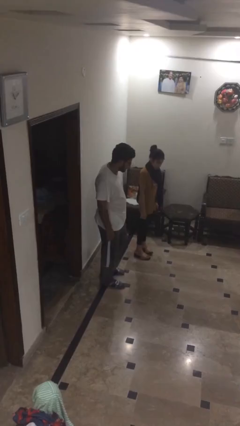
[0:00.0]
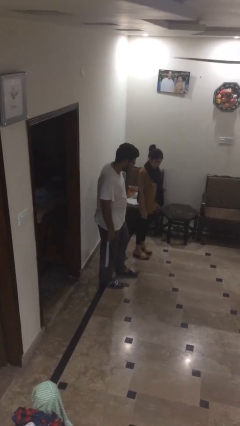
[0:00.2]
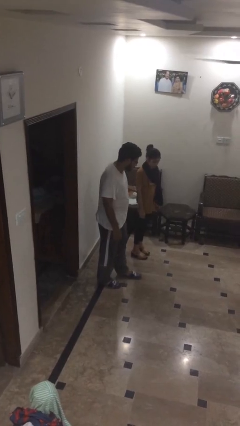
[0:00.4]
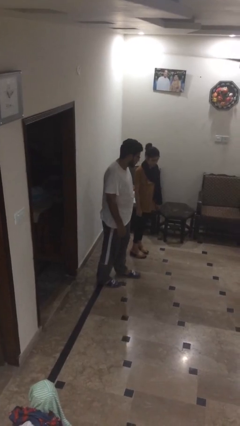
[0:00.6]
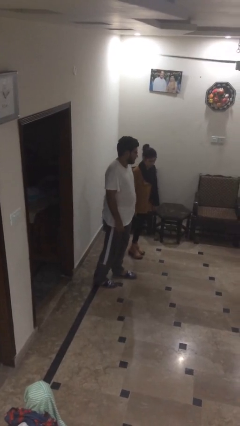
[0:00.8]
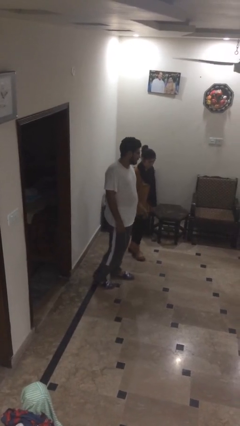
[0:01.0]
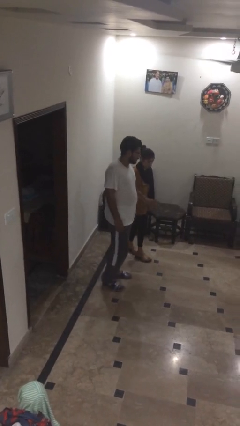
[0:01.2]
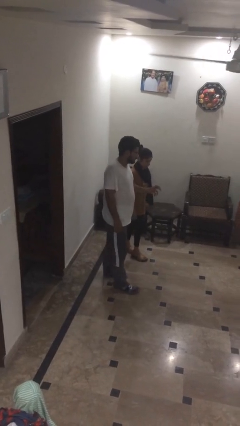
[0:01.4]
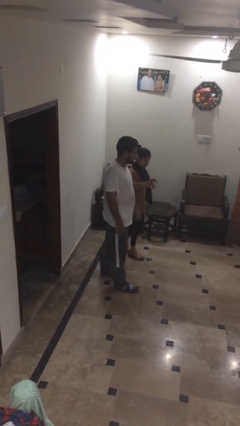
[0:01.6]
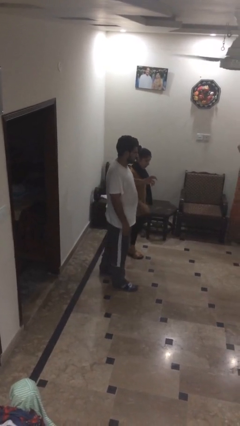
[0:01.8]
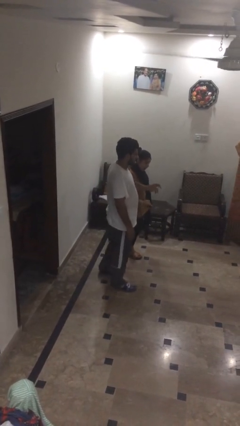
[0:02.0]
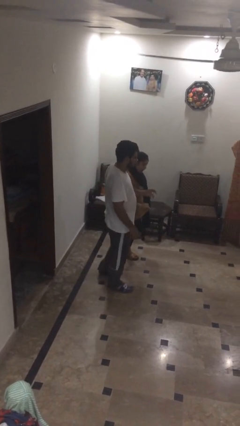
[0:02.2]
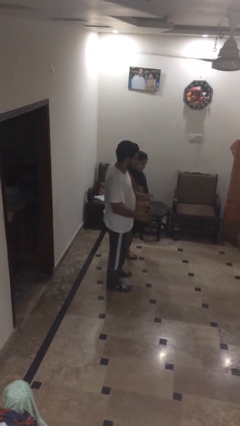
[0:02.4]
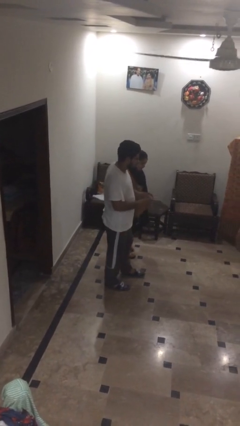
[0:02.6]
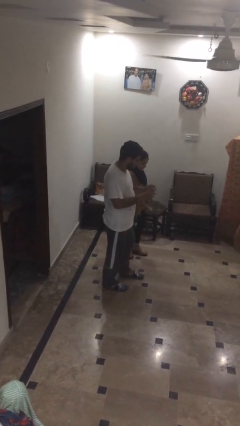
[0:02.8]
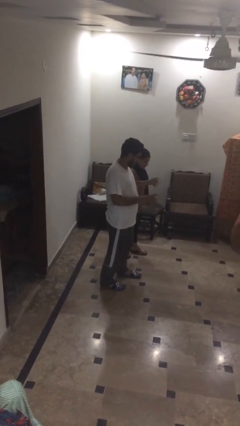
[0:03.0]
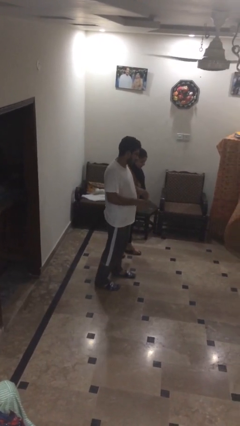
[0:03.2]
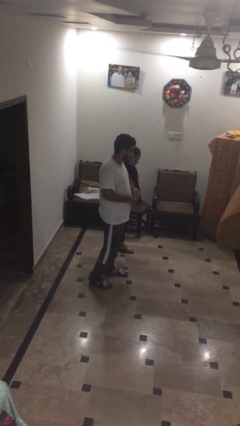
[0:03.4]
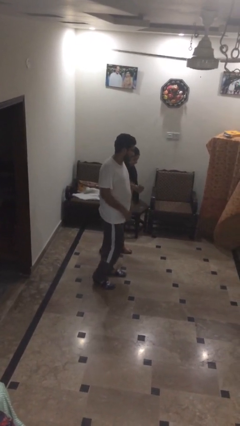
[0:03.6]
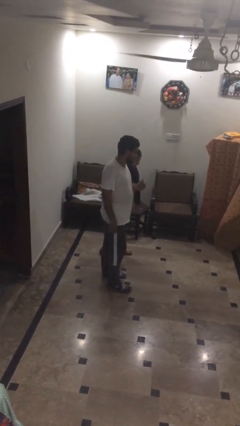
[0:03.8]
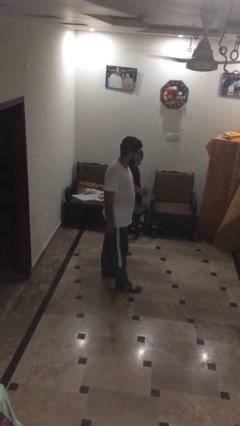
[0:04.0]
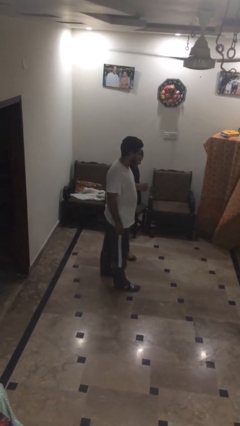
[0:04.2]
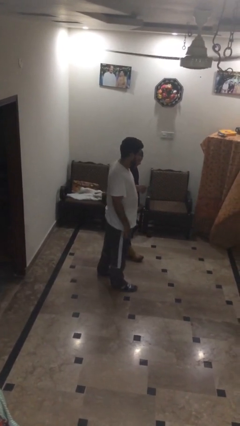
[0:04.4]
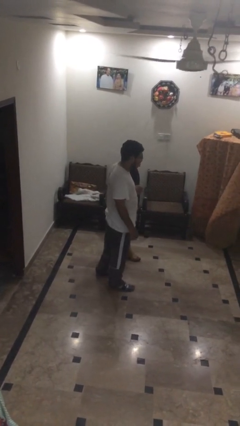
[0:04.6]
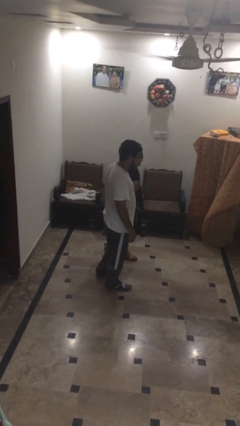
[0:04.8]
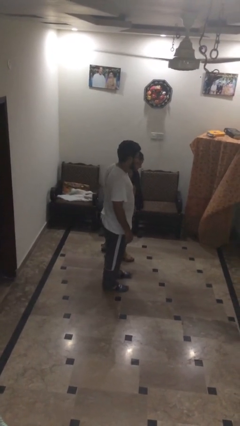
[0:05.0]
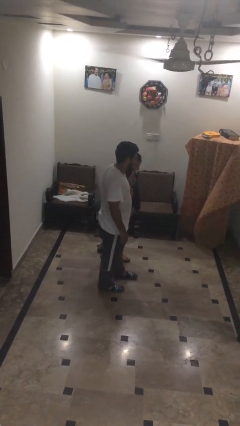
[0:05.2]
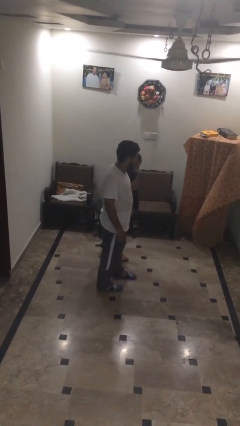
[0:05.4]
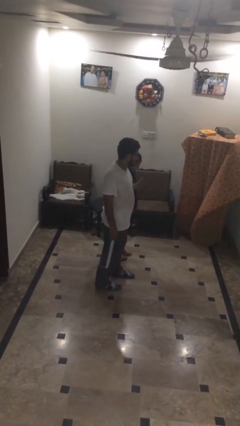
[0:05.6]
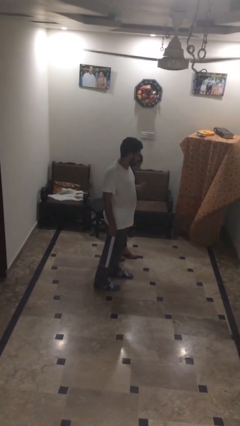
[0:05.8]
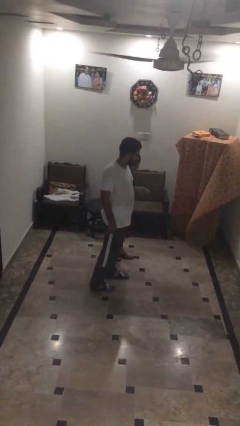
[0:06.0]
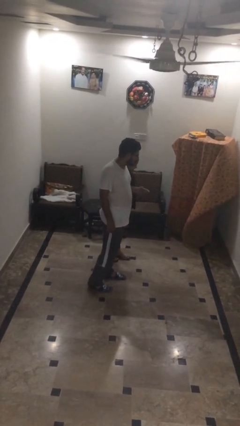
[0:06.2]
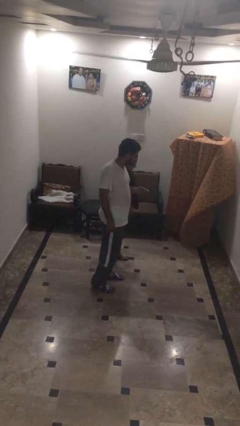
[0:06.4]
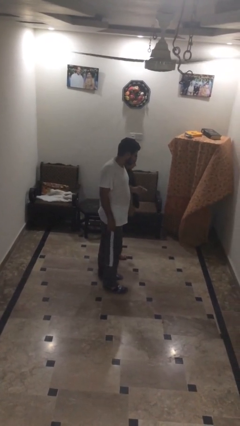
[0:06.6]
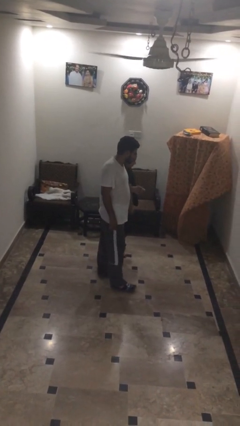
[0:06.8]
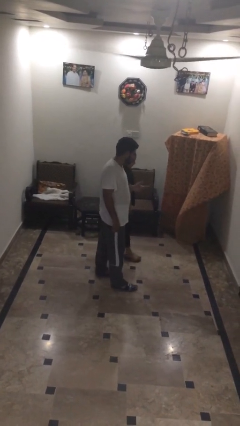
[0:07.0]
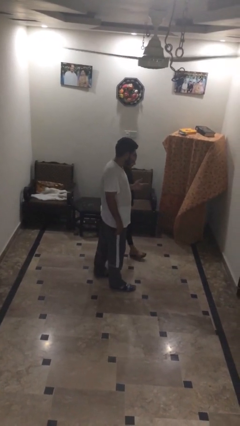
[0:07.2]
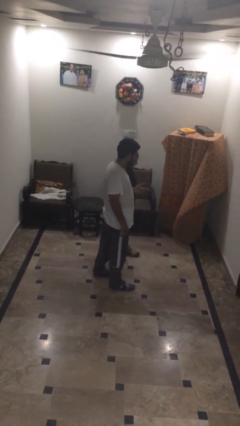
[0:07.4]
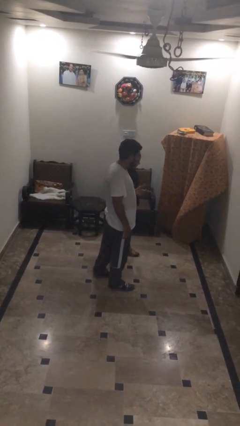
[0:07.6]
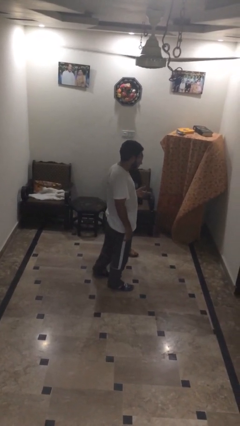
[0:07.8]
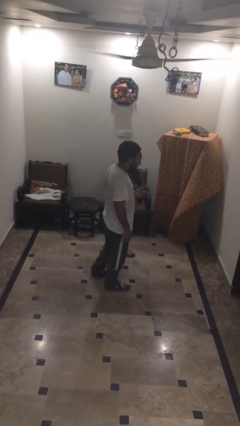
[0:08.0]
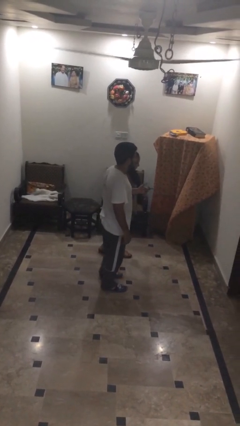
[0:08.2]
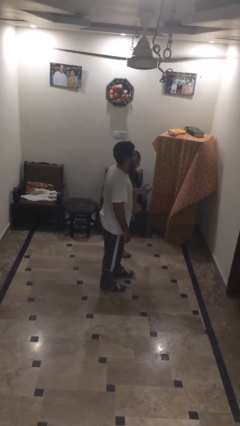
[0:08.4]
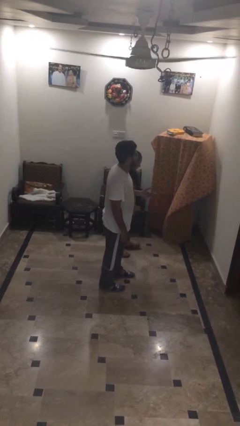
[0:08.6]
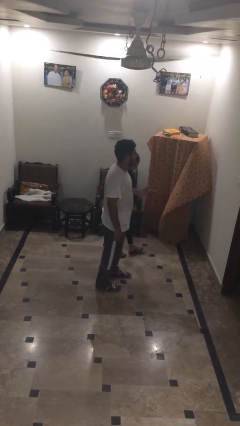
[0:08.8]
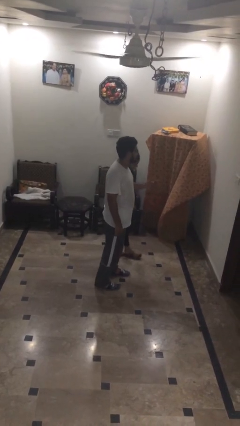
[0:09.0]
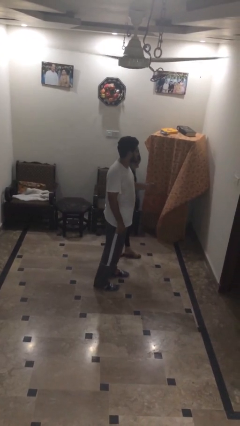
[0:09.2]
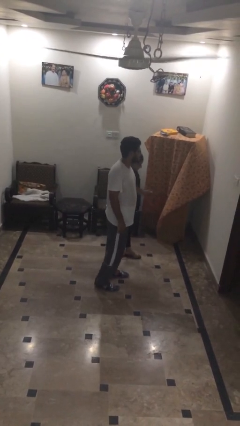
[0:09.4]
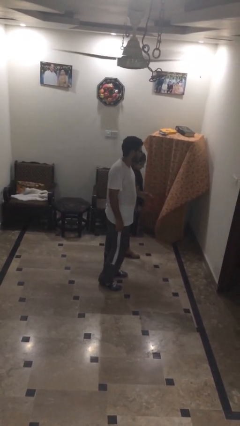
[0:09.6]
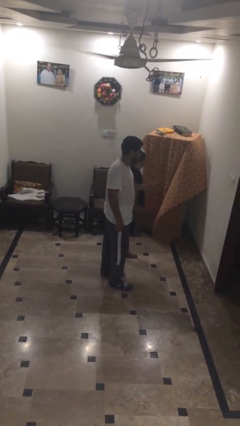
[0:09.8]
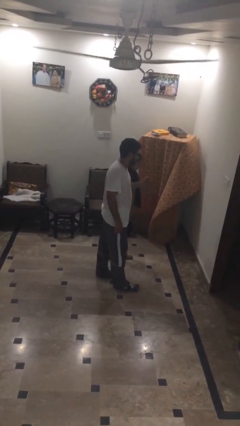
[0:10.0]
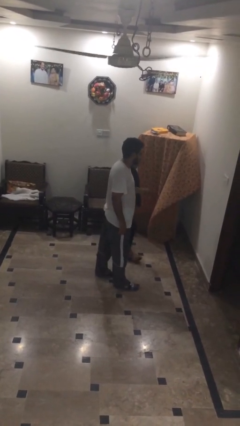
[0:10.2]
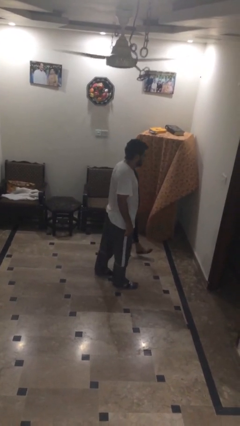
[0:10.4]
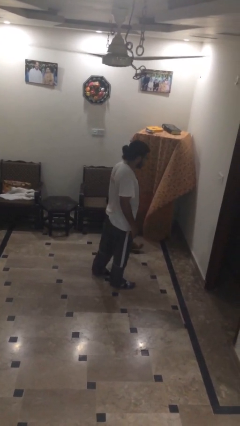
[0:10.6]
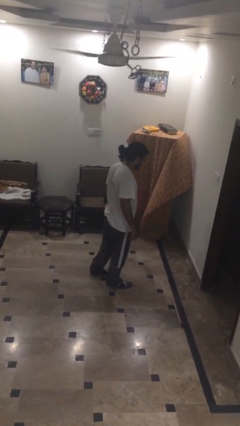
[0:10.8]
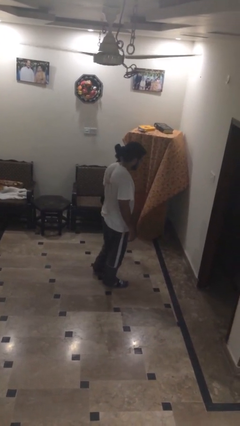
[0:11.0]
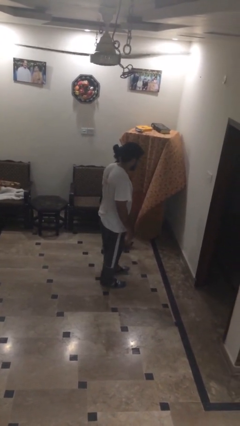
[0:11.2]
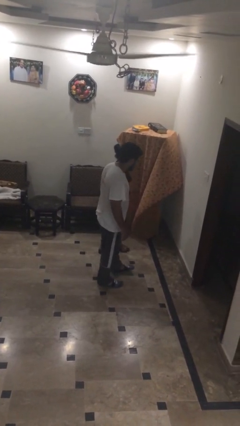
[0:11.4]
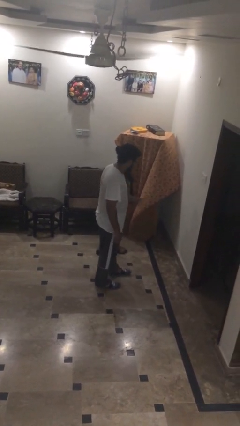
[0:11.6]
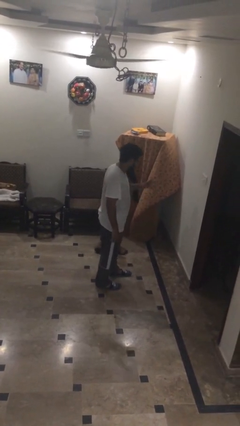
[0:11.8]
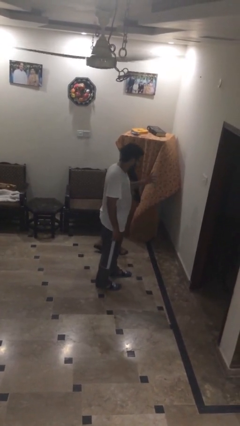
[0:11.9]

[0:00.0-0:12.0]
person talks to person

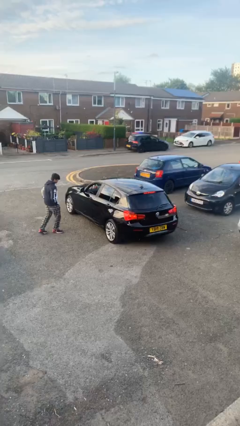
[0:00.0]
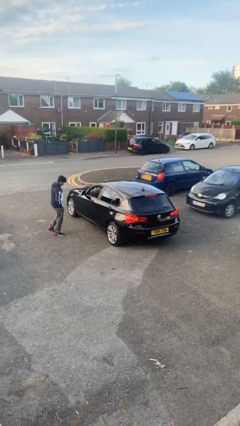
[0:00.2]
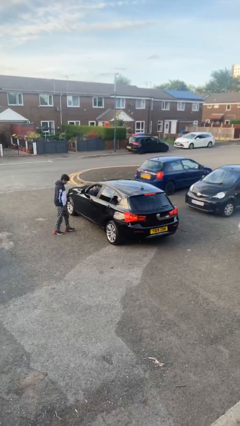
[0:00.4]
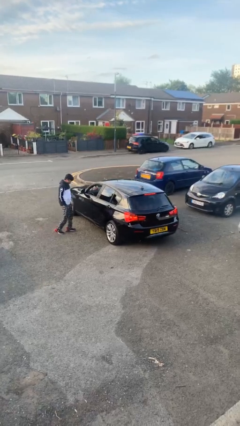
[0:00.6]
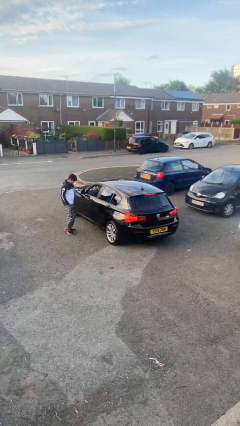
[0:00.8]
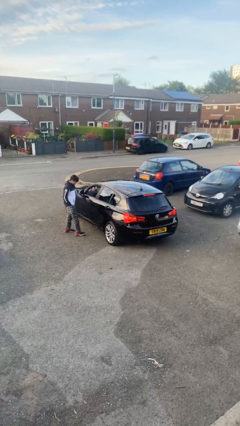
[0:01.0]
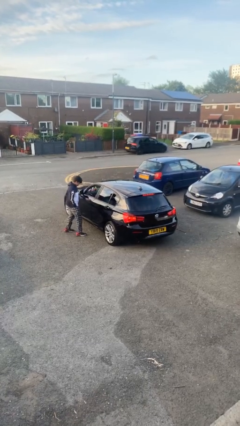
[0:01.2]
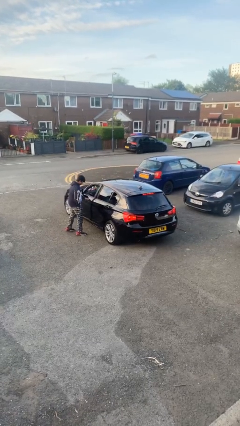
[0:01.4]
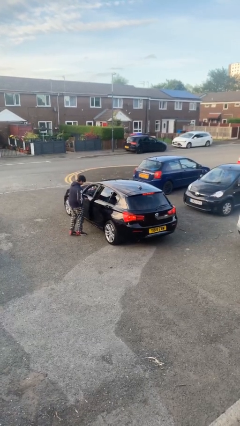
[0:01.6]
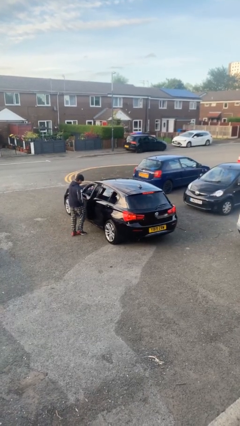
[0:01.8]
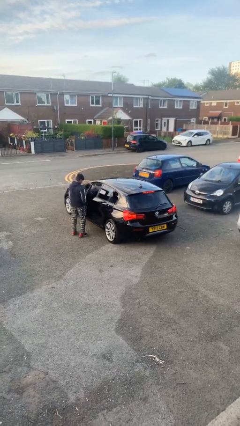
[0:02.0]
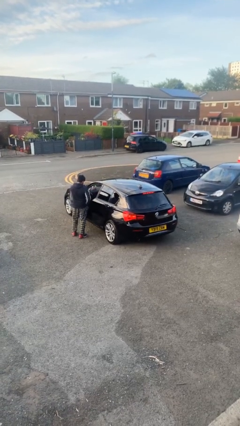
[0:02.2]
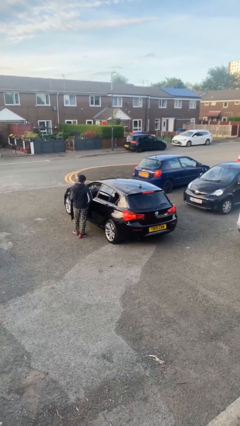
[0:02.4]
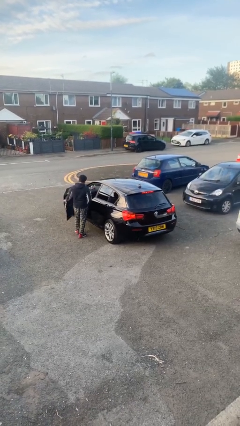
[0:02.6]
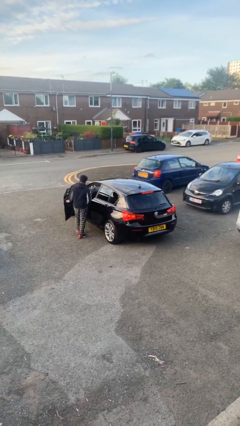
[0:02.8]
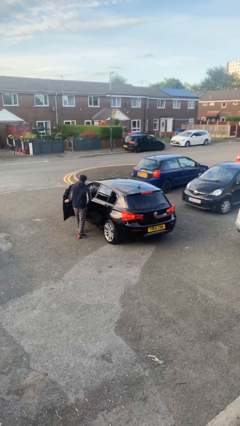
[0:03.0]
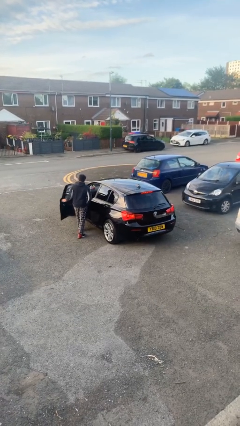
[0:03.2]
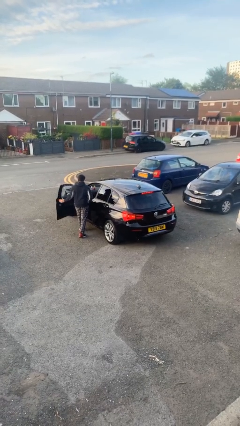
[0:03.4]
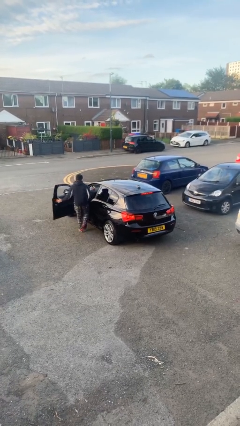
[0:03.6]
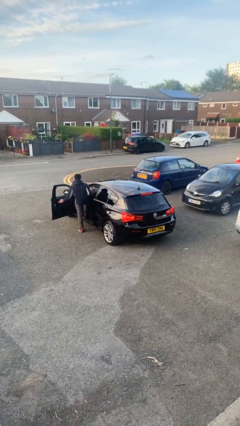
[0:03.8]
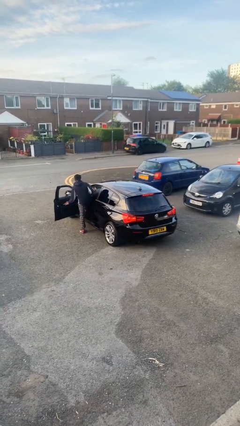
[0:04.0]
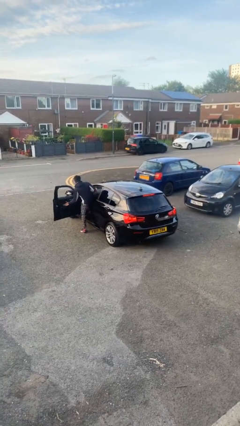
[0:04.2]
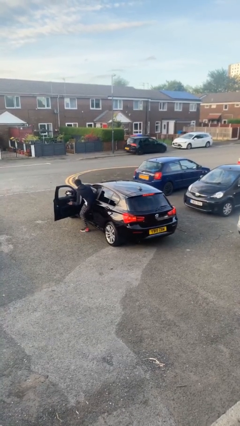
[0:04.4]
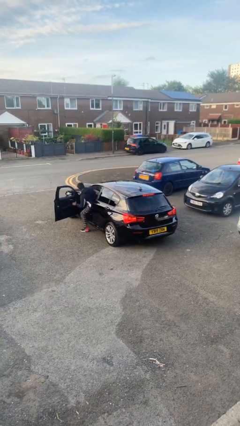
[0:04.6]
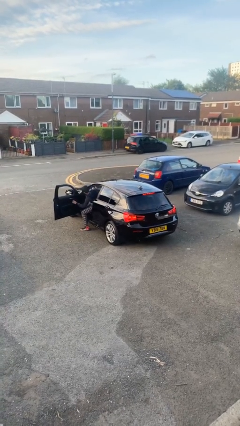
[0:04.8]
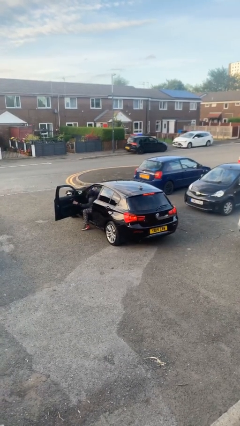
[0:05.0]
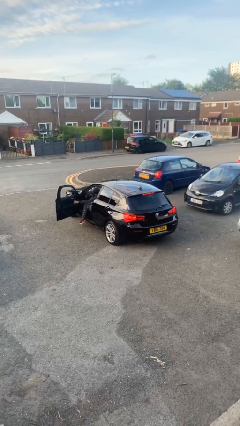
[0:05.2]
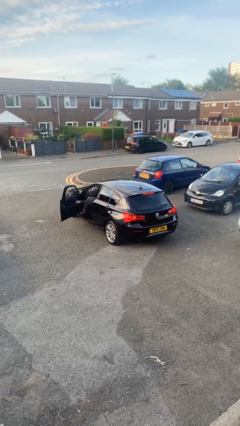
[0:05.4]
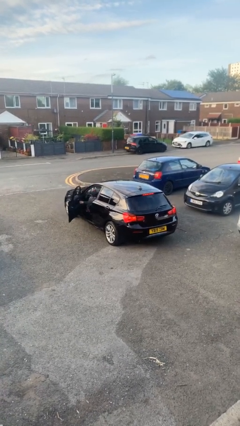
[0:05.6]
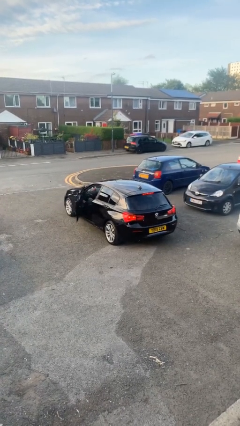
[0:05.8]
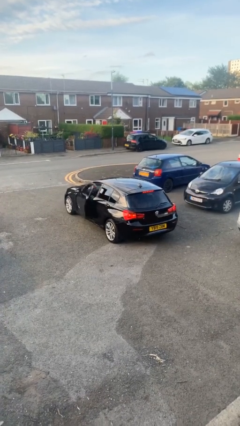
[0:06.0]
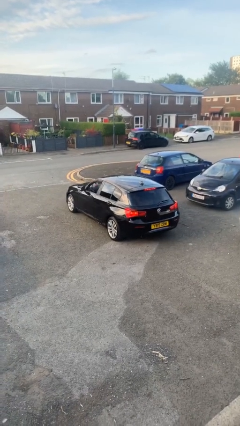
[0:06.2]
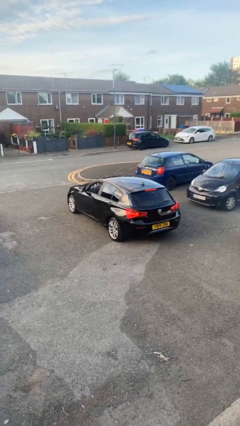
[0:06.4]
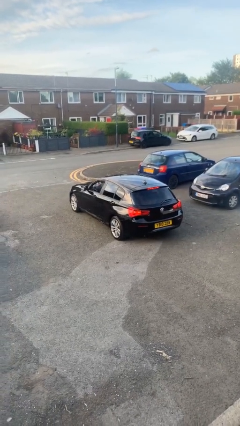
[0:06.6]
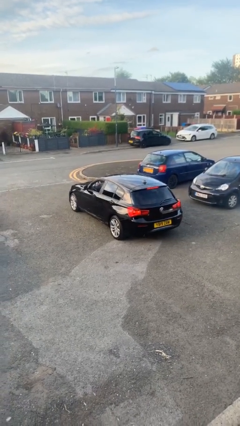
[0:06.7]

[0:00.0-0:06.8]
car picks up person
